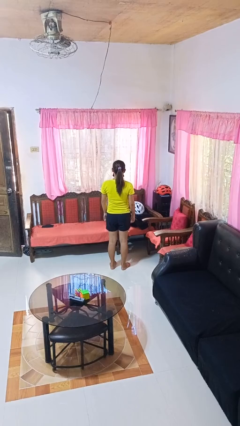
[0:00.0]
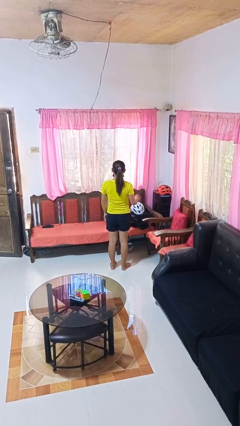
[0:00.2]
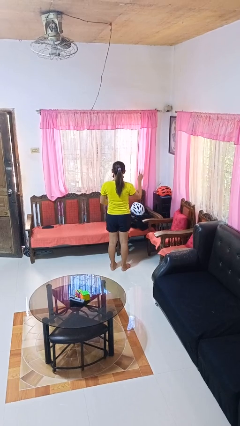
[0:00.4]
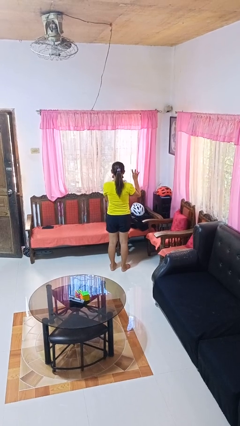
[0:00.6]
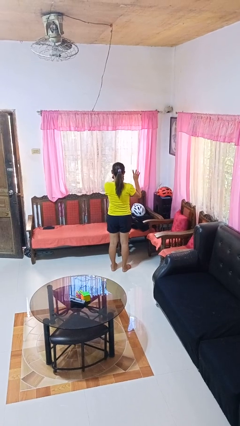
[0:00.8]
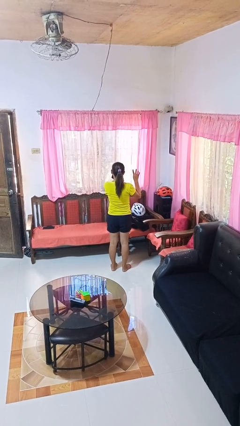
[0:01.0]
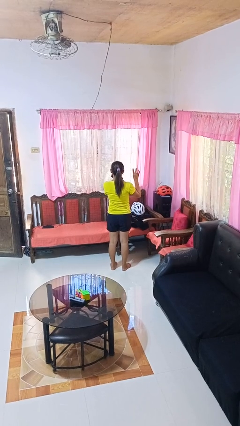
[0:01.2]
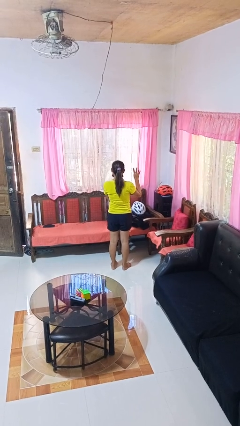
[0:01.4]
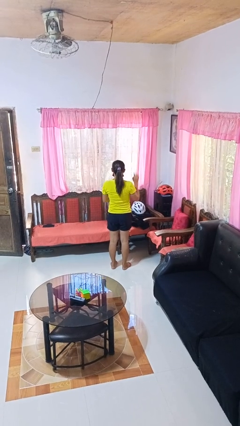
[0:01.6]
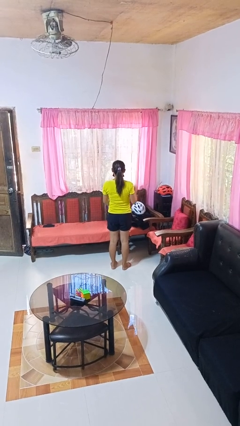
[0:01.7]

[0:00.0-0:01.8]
person gestures number four

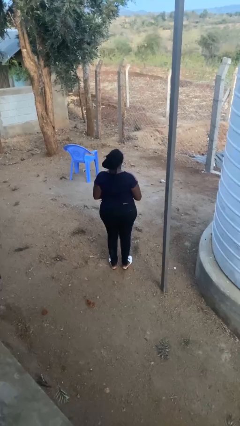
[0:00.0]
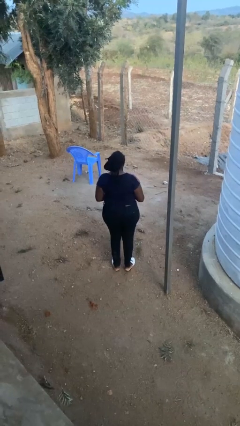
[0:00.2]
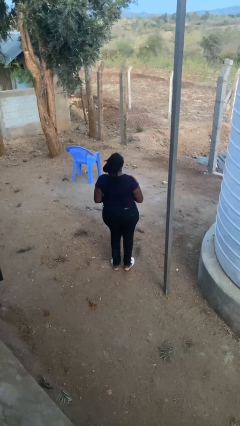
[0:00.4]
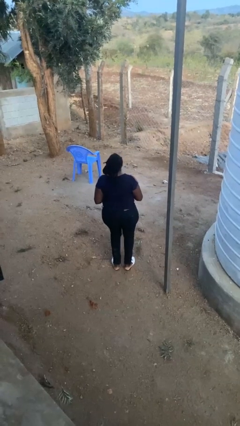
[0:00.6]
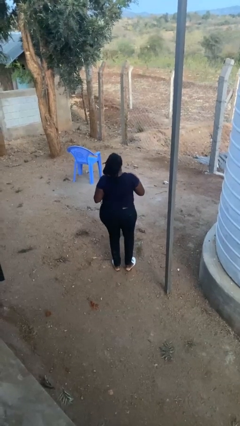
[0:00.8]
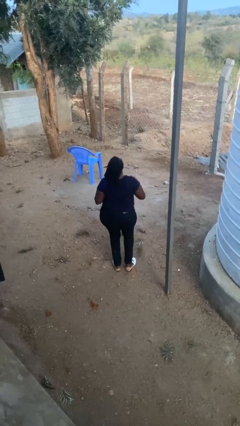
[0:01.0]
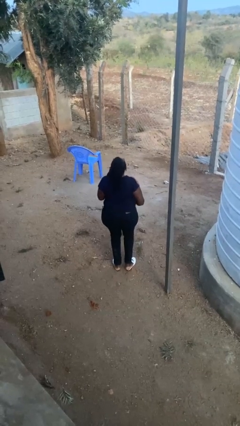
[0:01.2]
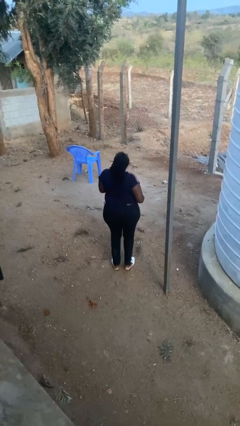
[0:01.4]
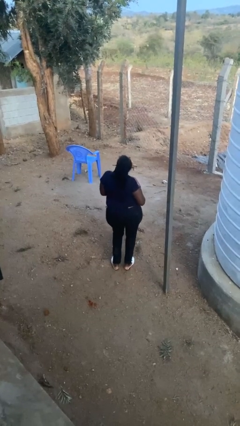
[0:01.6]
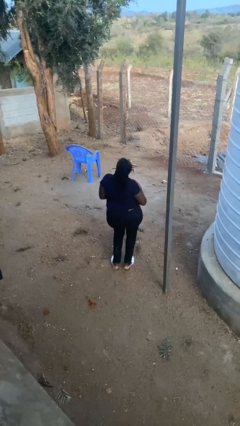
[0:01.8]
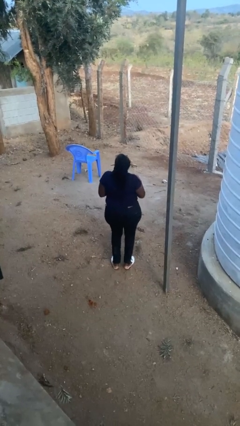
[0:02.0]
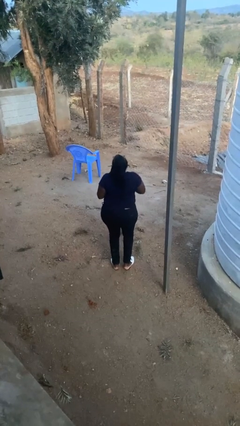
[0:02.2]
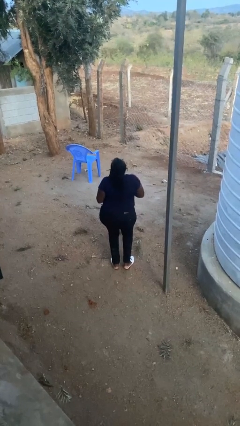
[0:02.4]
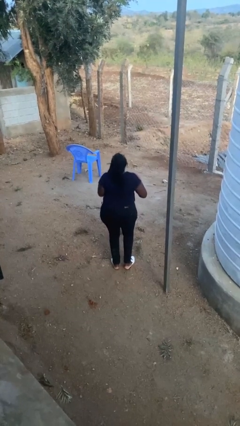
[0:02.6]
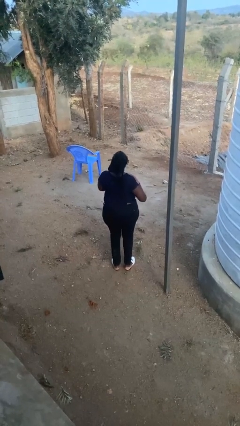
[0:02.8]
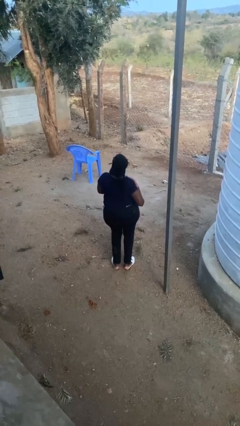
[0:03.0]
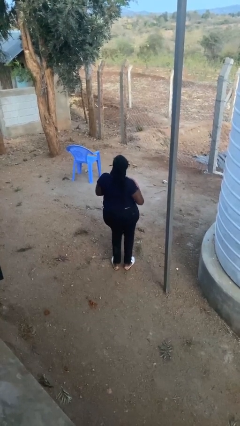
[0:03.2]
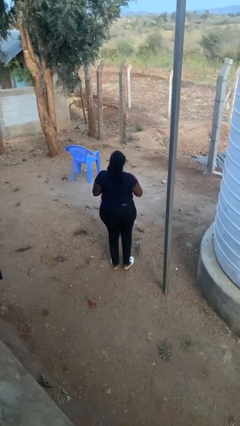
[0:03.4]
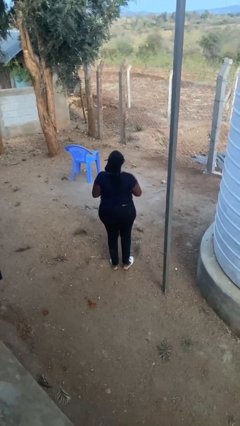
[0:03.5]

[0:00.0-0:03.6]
person dances in place

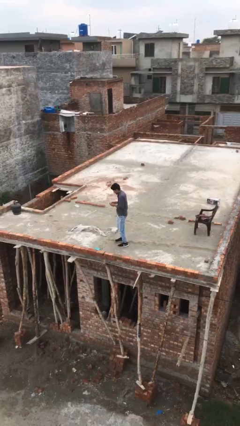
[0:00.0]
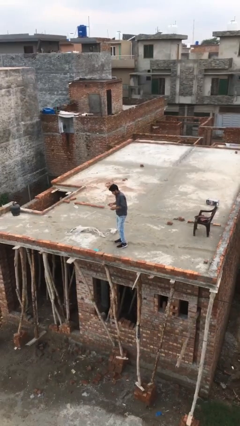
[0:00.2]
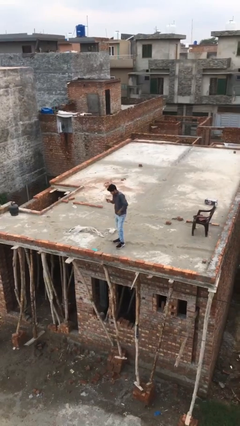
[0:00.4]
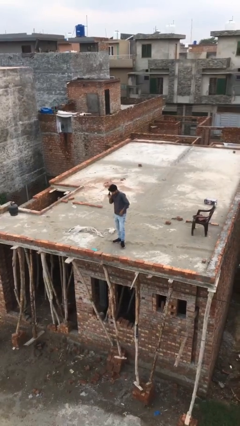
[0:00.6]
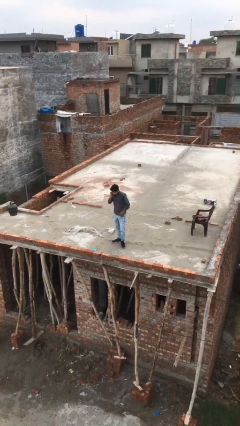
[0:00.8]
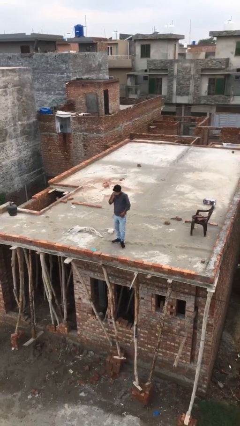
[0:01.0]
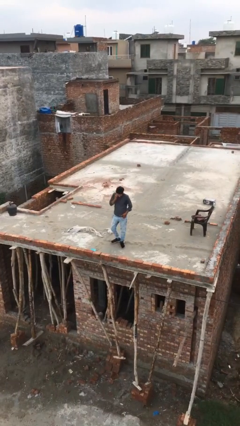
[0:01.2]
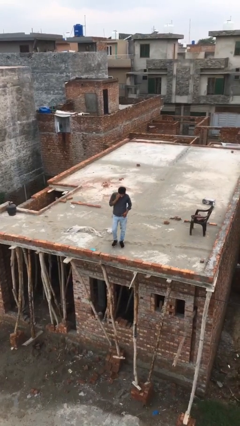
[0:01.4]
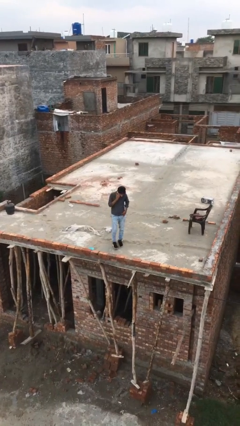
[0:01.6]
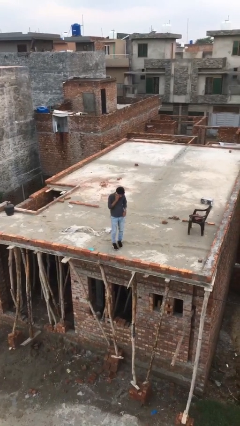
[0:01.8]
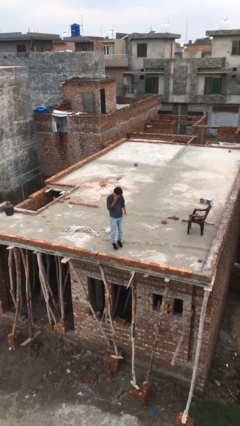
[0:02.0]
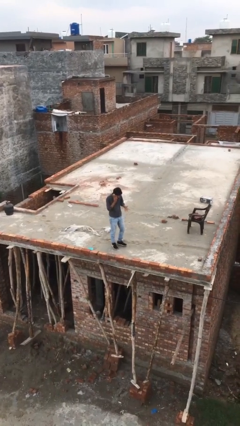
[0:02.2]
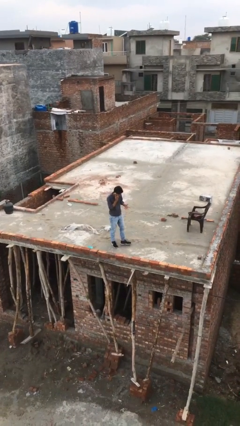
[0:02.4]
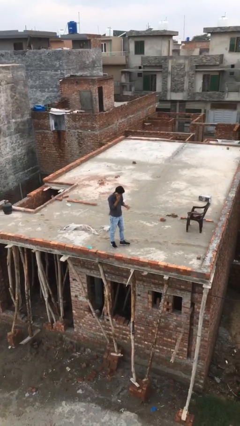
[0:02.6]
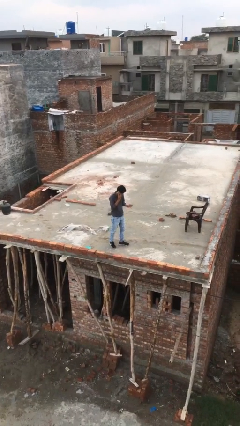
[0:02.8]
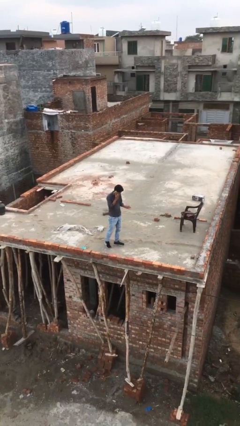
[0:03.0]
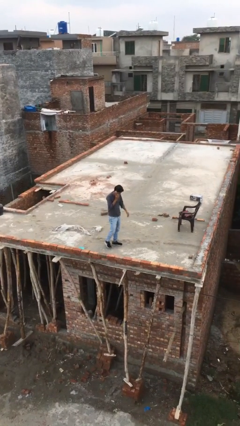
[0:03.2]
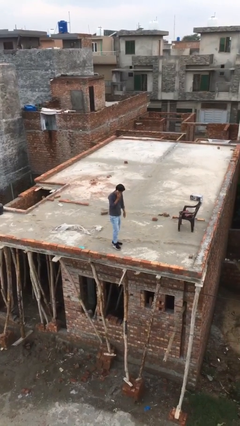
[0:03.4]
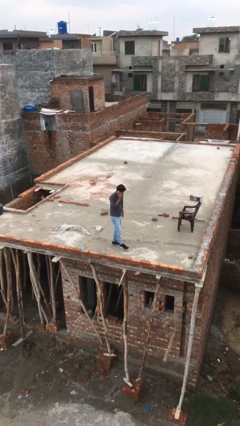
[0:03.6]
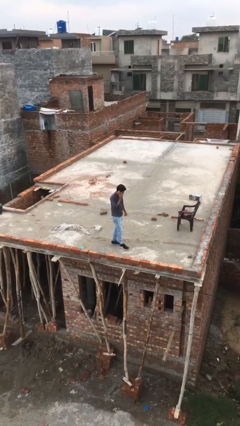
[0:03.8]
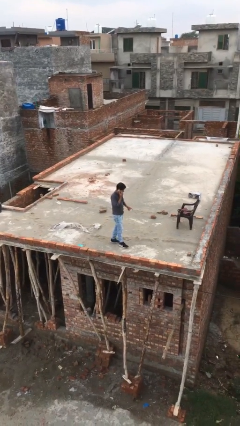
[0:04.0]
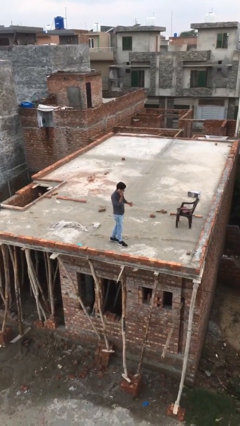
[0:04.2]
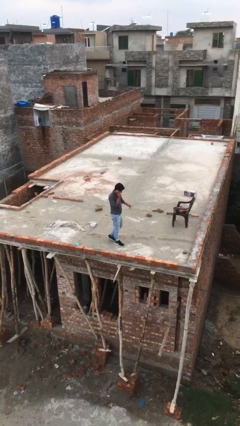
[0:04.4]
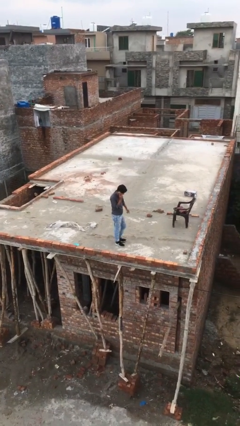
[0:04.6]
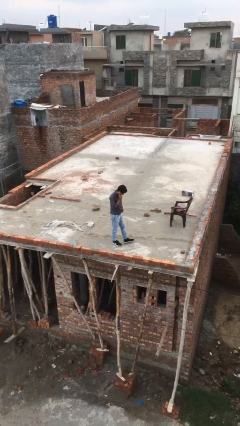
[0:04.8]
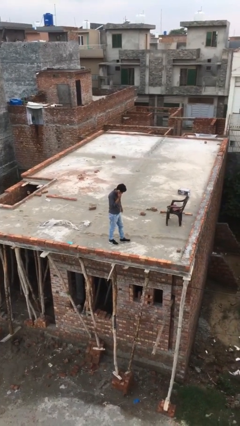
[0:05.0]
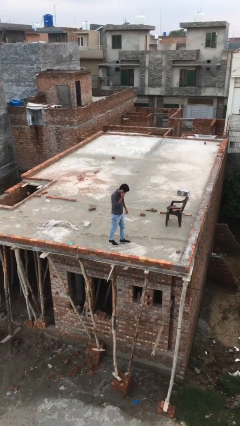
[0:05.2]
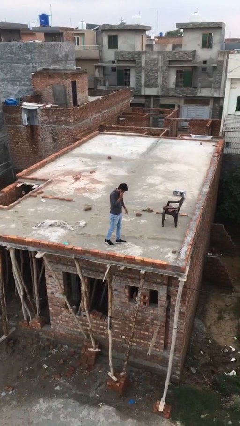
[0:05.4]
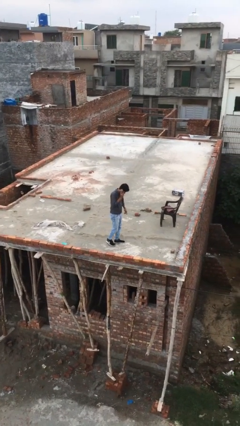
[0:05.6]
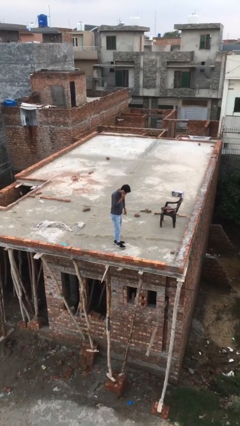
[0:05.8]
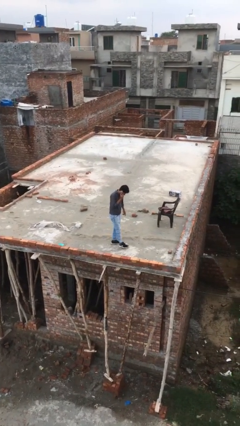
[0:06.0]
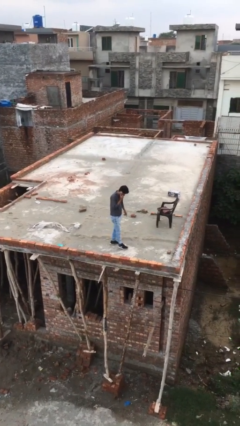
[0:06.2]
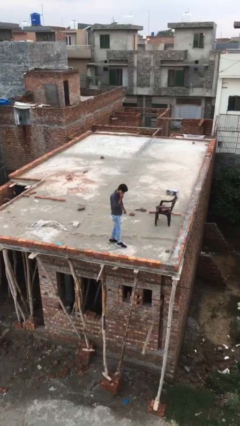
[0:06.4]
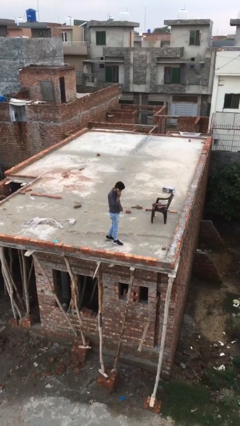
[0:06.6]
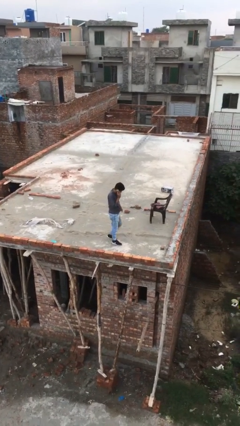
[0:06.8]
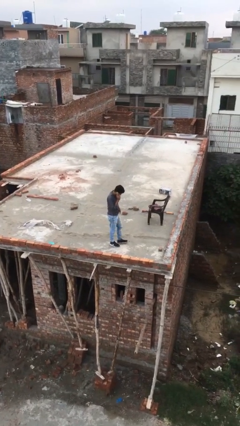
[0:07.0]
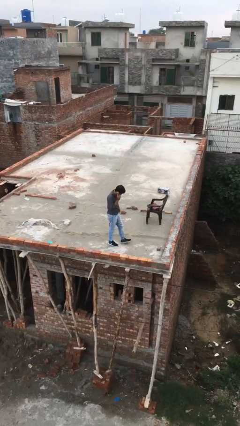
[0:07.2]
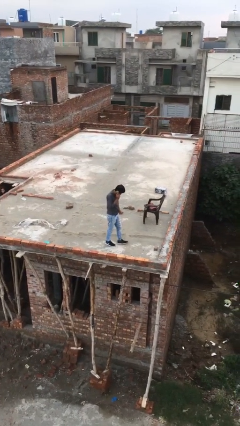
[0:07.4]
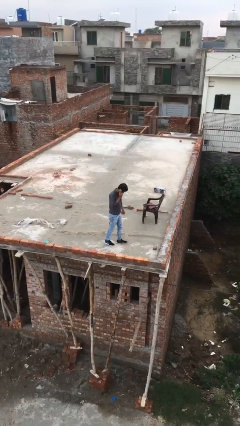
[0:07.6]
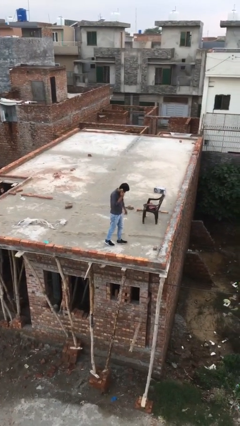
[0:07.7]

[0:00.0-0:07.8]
person talks on phone

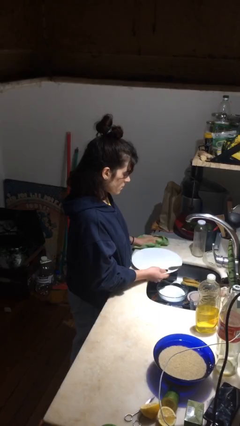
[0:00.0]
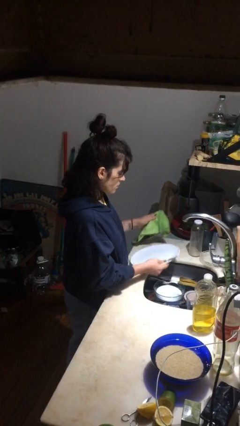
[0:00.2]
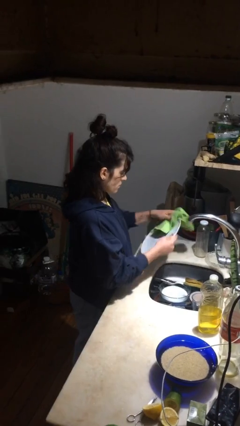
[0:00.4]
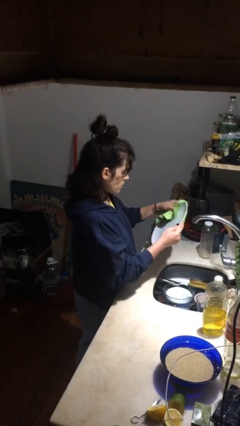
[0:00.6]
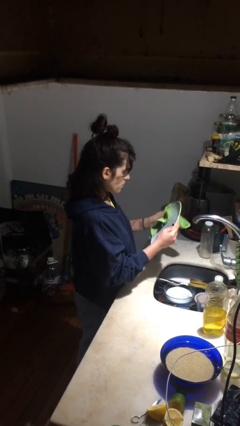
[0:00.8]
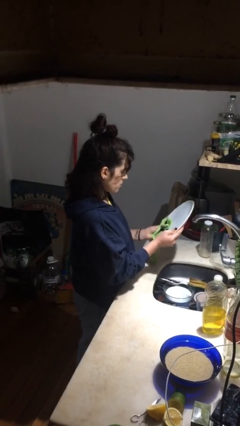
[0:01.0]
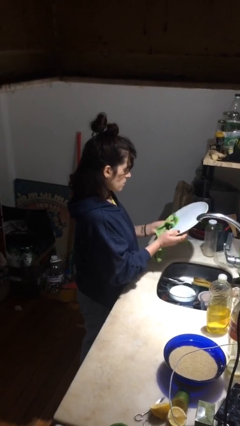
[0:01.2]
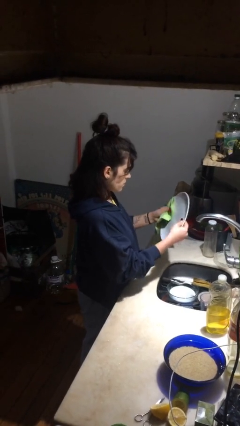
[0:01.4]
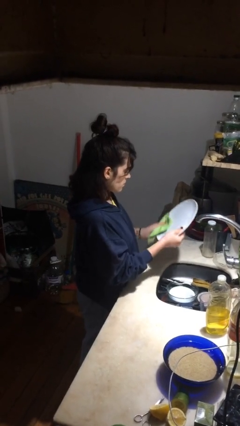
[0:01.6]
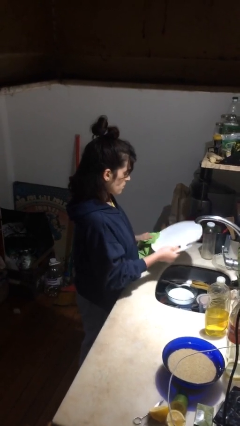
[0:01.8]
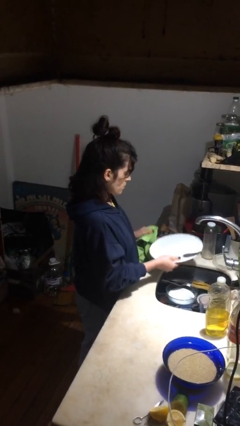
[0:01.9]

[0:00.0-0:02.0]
person dries dish

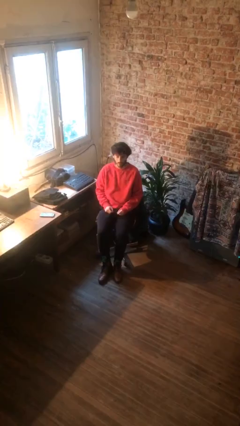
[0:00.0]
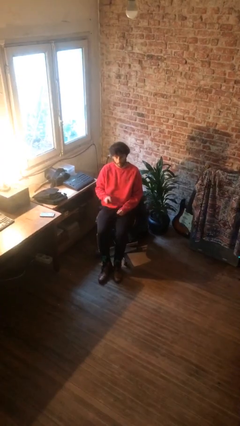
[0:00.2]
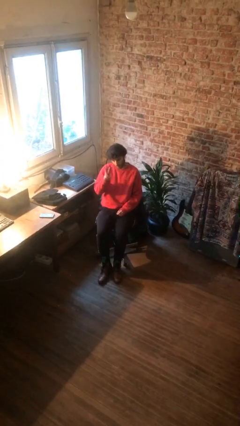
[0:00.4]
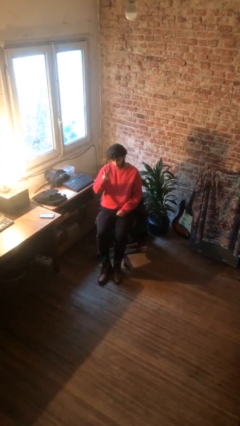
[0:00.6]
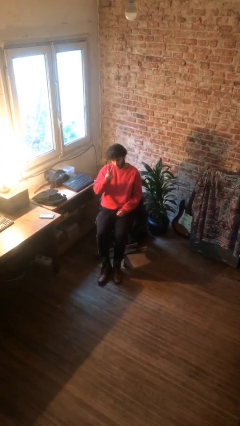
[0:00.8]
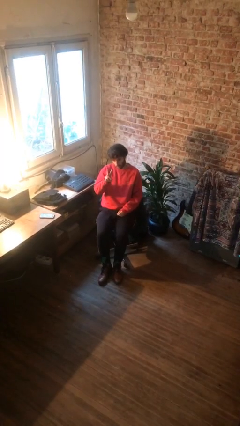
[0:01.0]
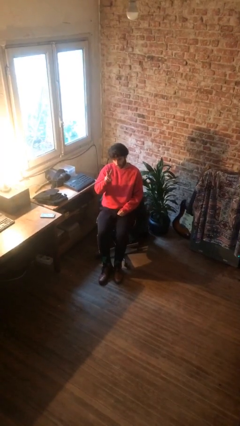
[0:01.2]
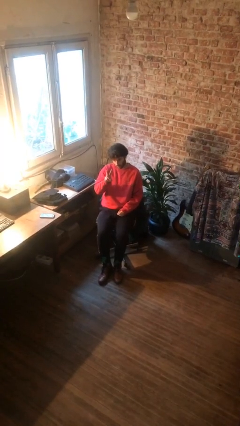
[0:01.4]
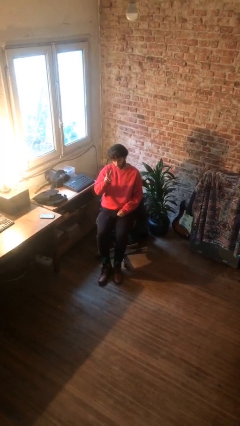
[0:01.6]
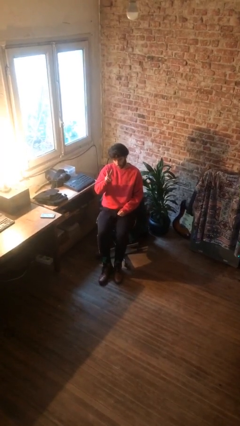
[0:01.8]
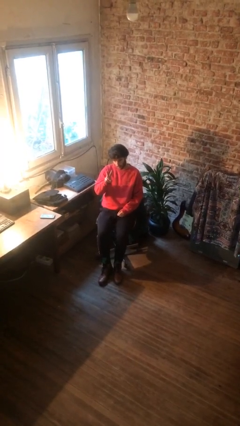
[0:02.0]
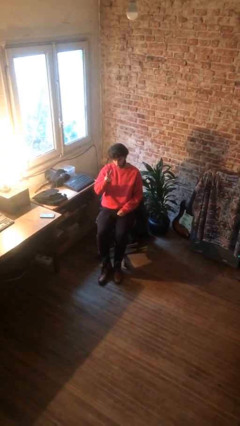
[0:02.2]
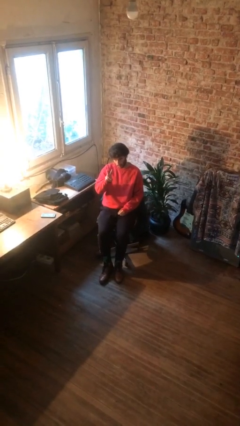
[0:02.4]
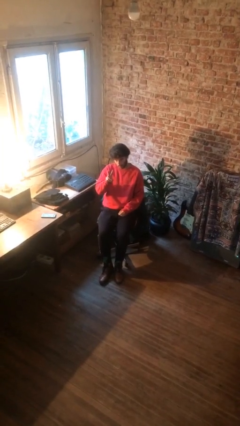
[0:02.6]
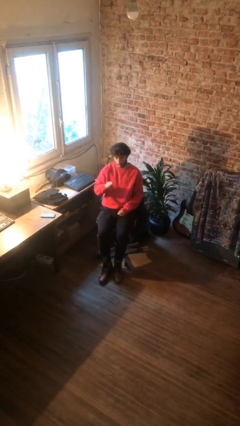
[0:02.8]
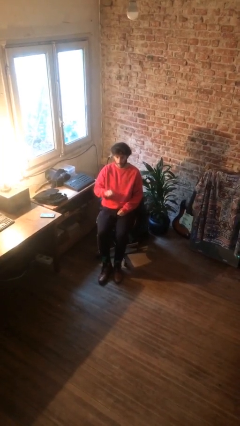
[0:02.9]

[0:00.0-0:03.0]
person gestures peace
